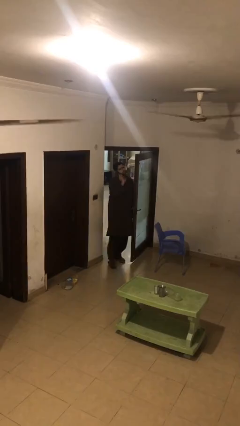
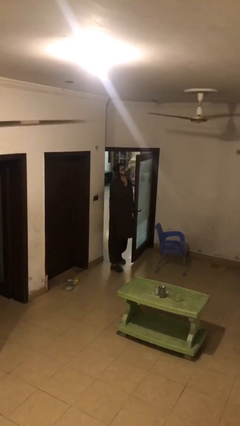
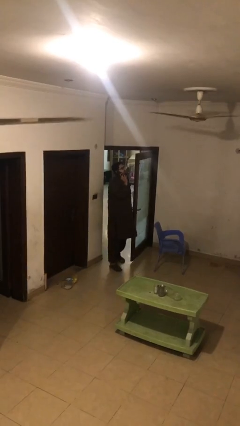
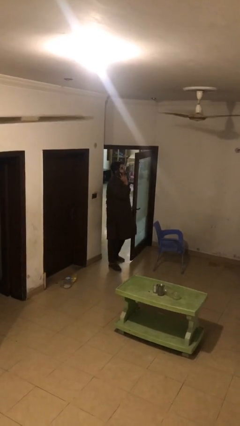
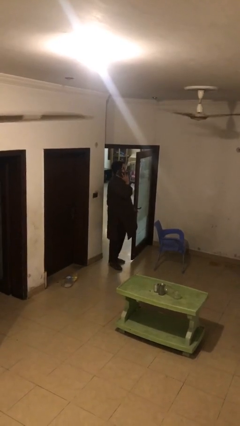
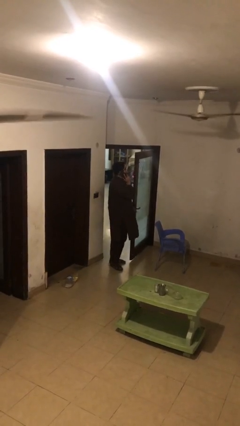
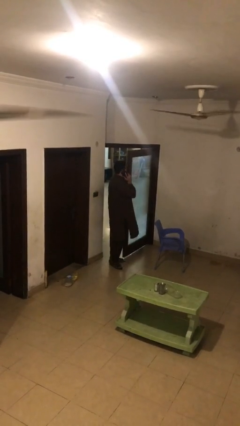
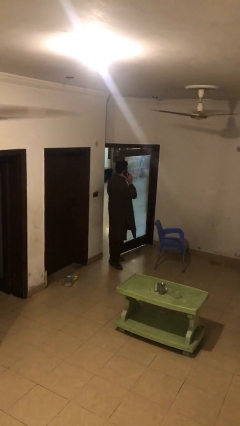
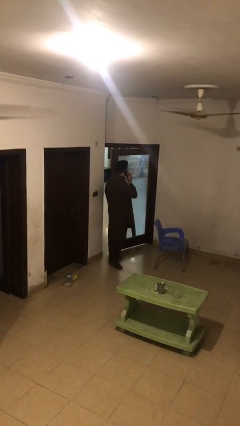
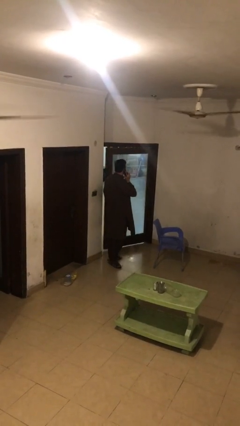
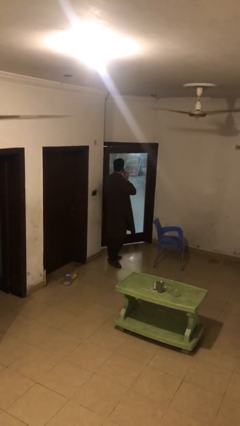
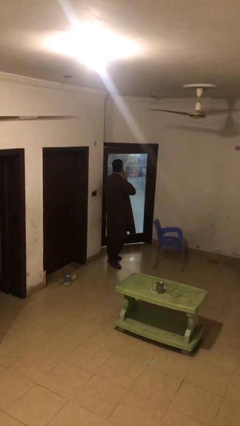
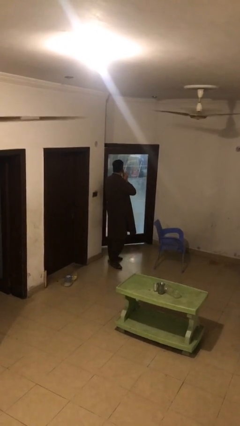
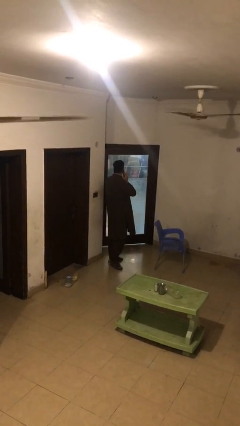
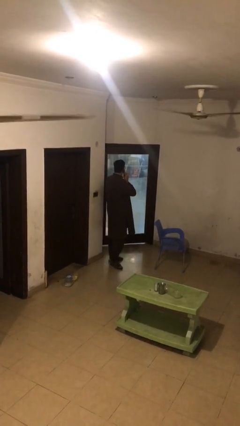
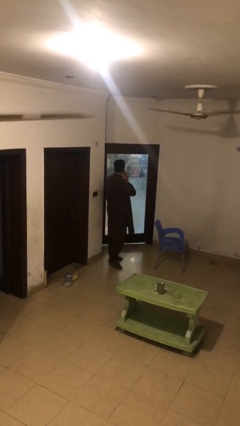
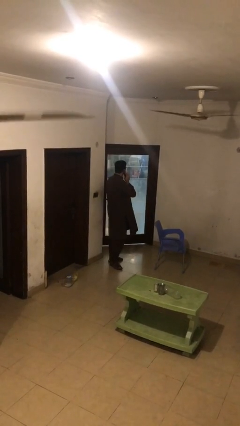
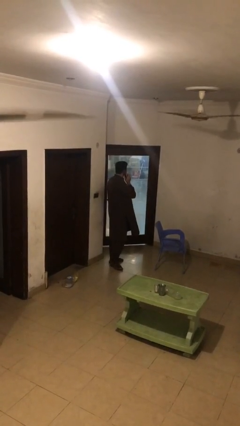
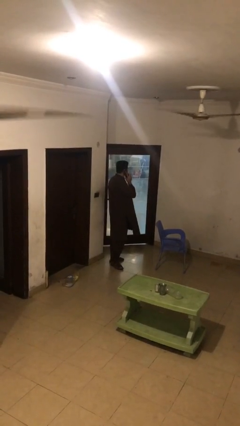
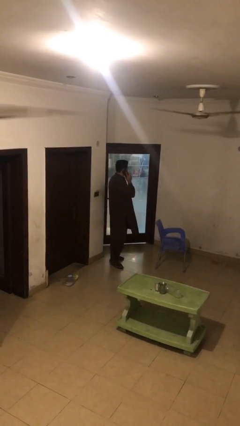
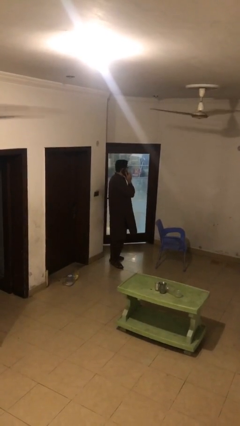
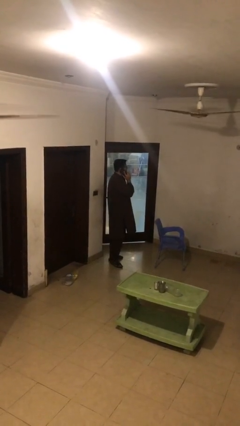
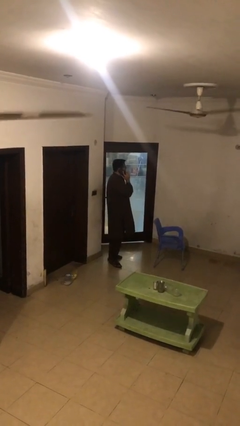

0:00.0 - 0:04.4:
person closes facility door

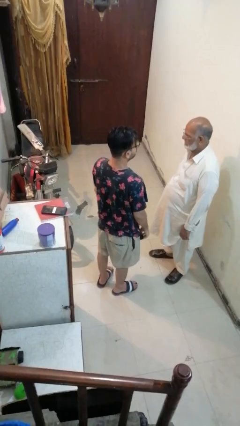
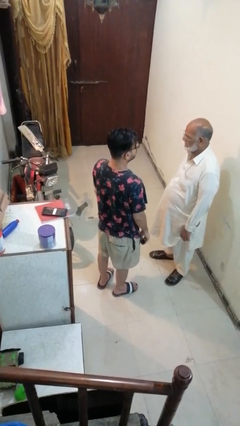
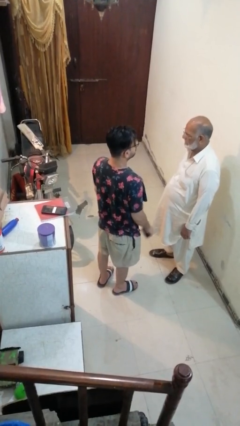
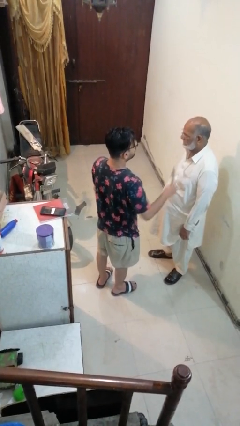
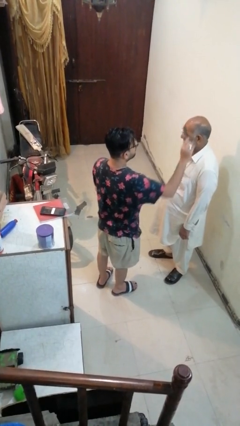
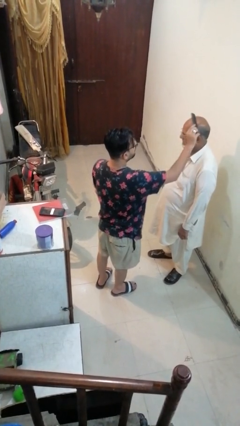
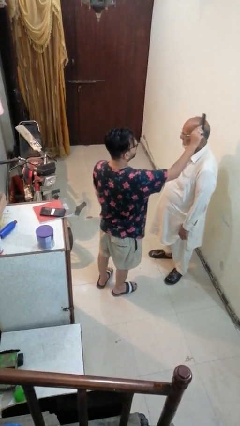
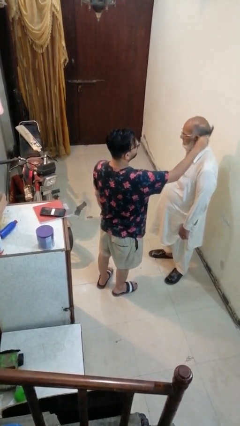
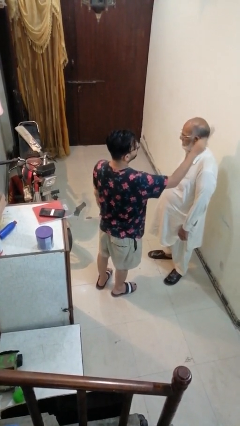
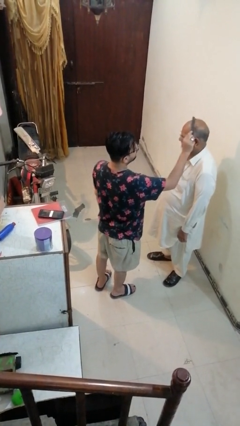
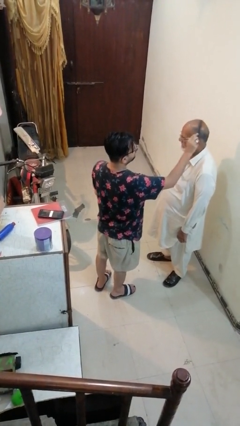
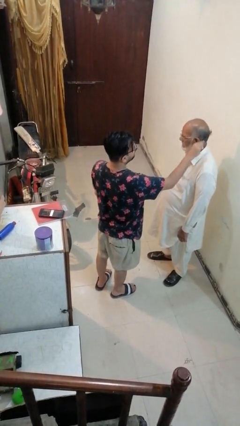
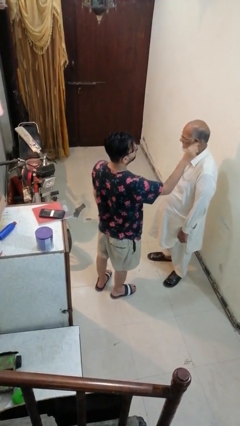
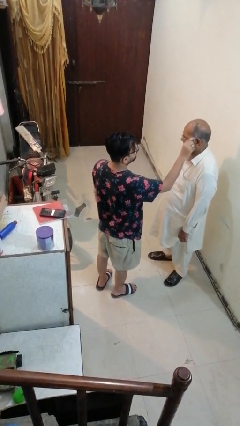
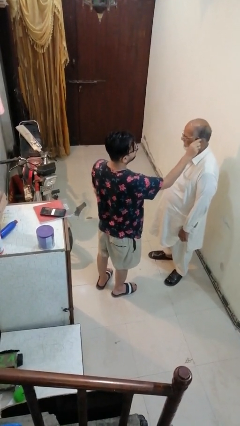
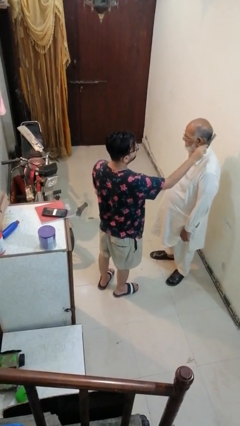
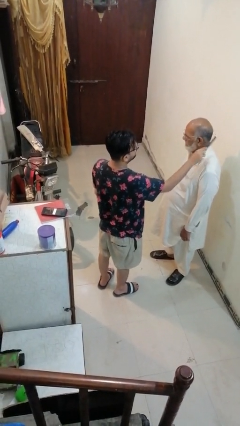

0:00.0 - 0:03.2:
person brushes hair of person

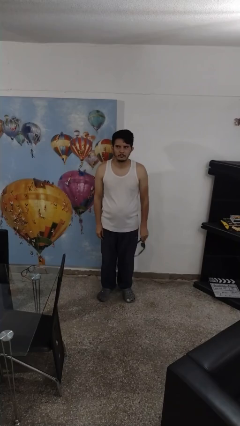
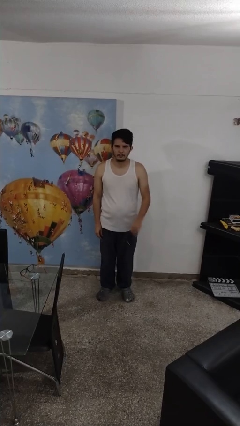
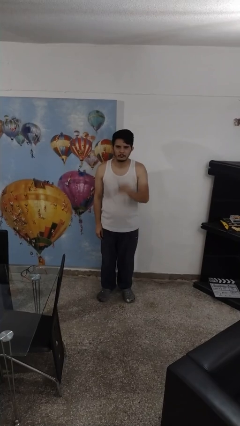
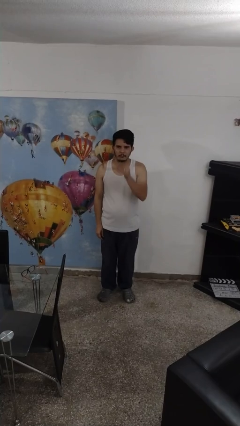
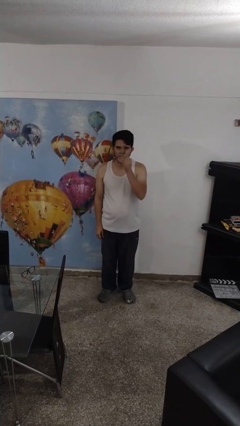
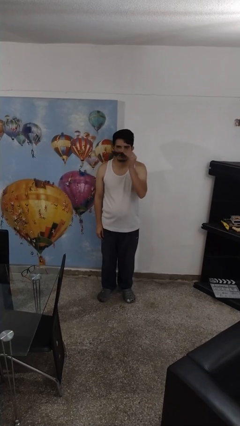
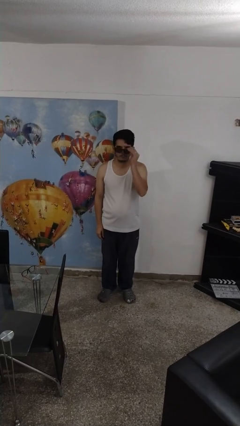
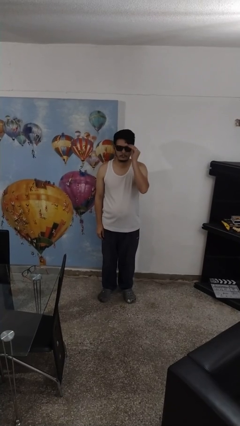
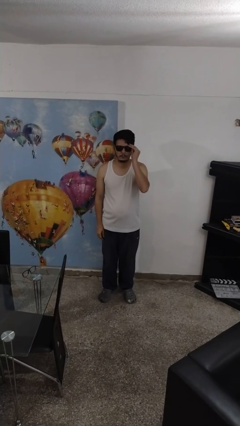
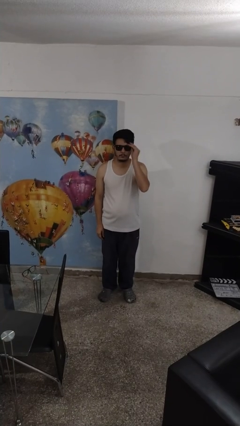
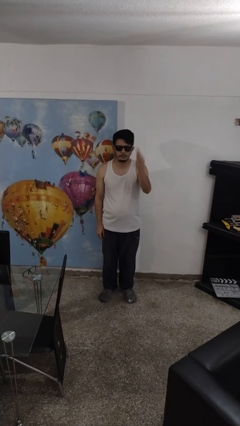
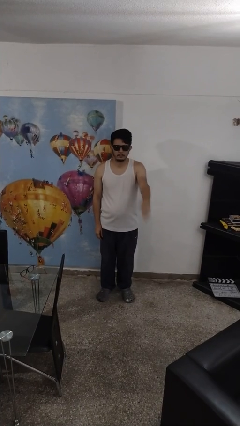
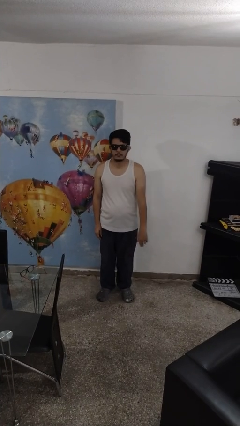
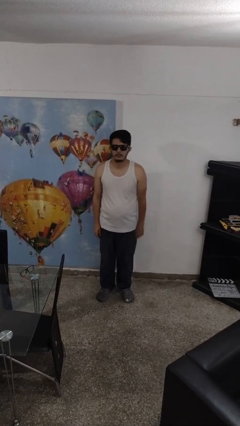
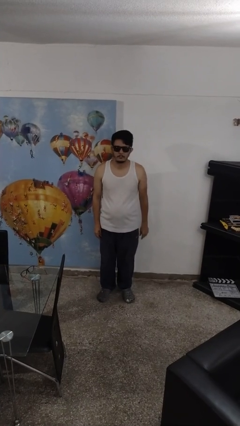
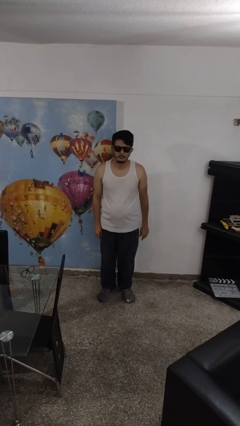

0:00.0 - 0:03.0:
person puts on sunglasses

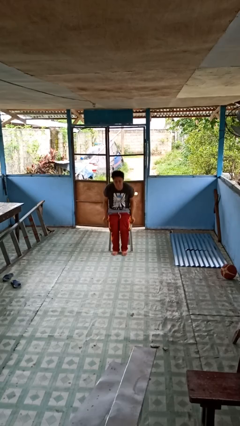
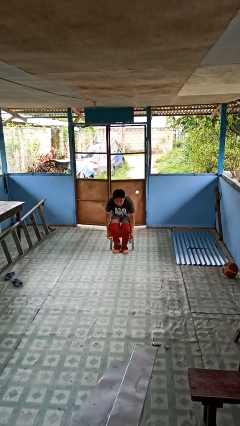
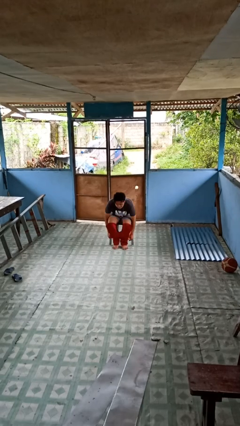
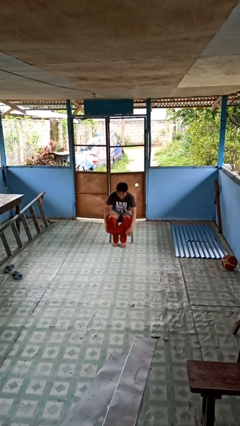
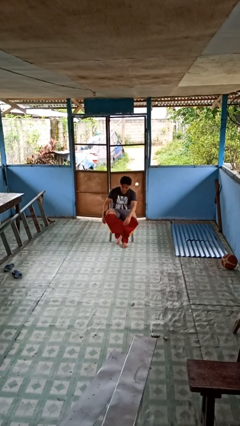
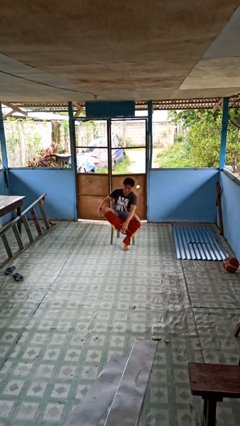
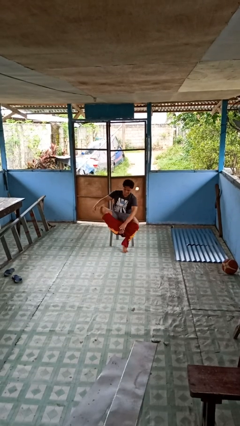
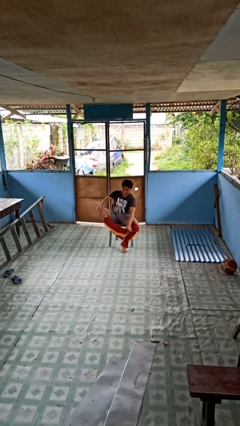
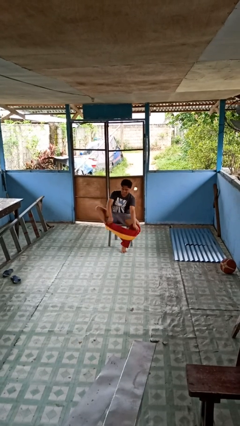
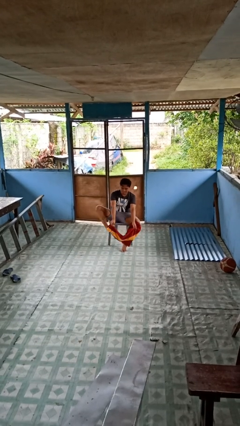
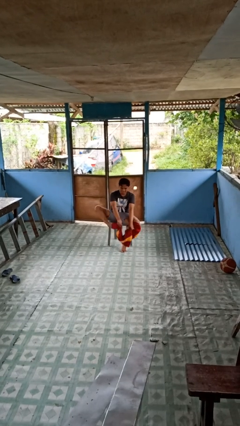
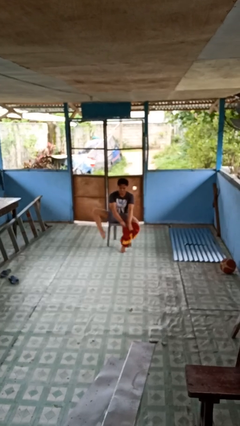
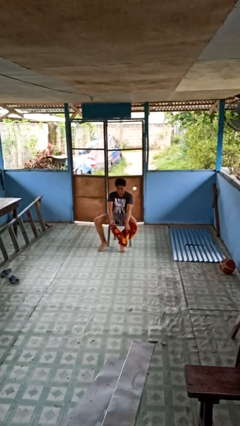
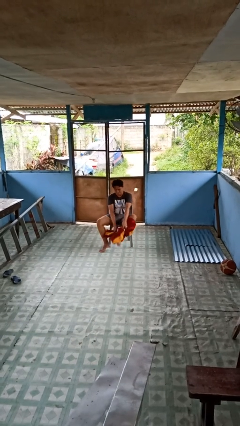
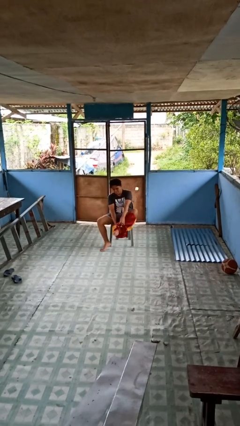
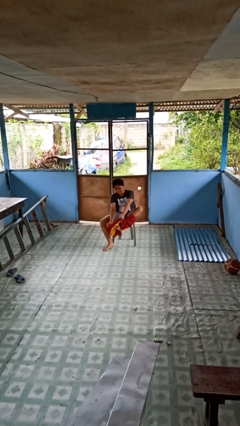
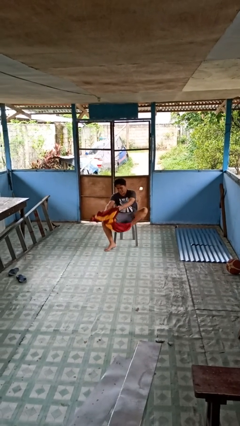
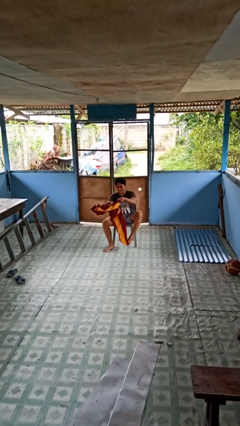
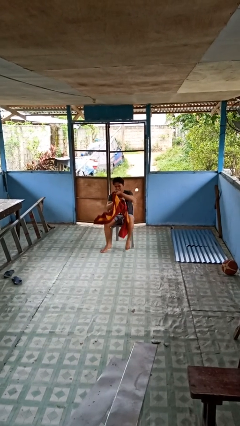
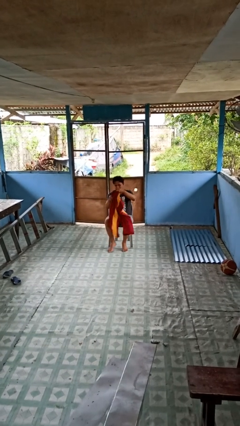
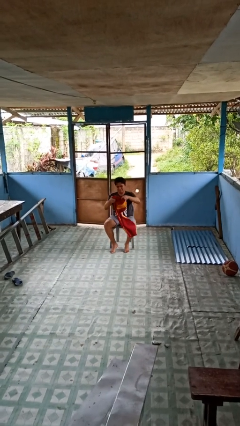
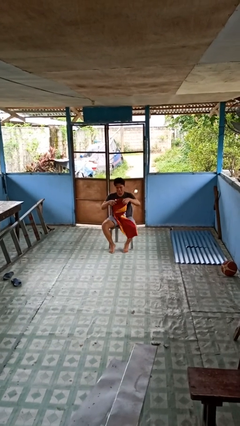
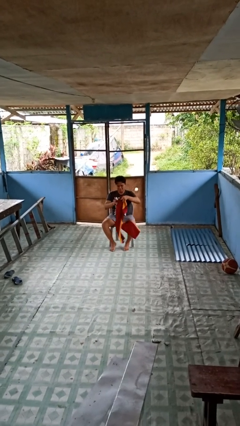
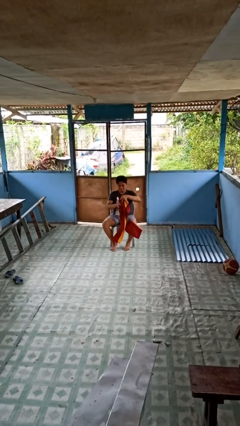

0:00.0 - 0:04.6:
person takes off pants

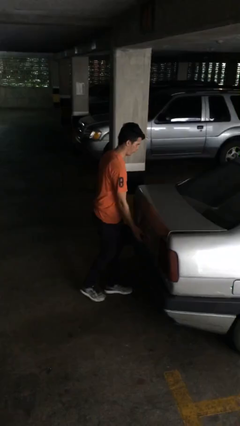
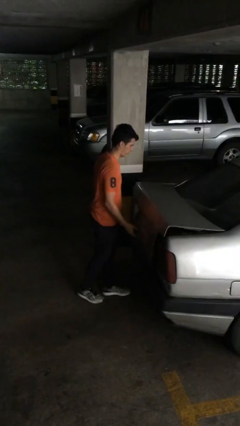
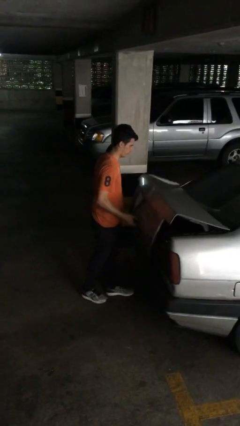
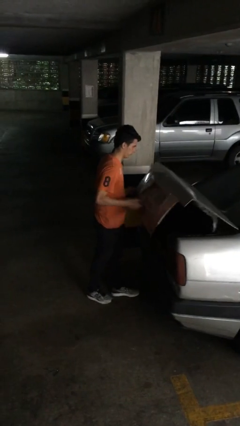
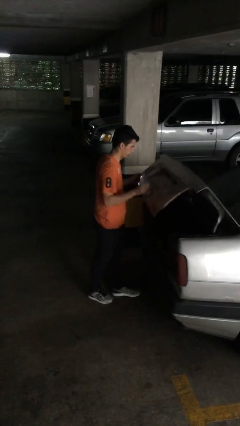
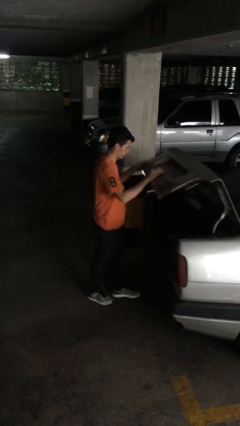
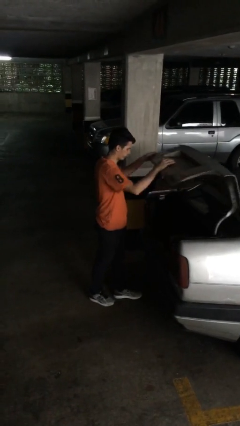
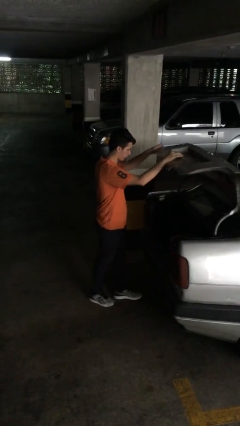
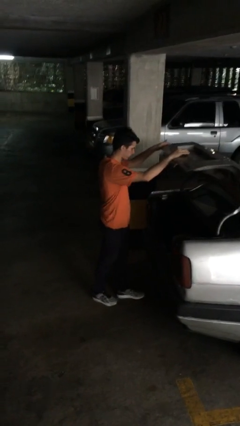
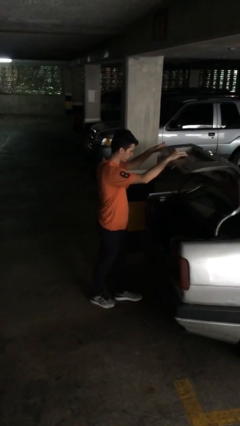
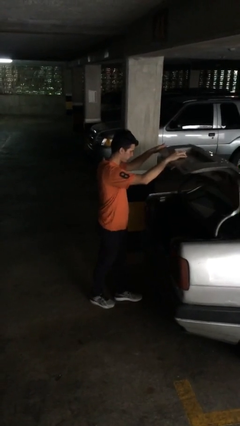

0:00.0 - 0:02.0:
person opens car trunk
